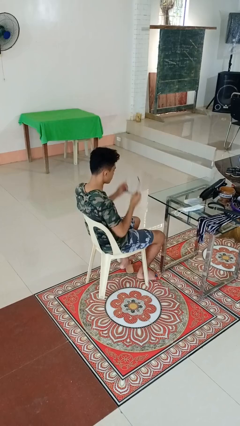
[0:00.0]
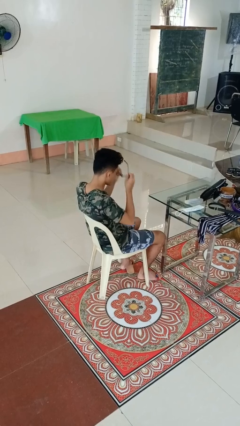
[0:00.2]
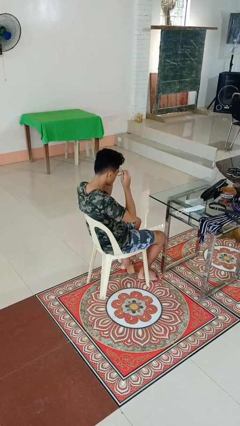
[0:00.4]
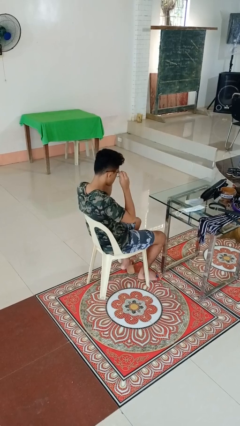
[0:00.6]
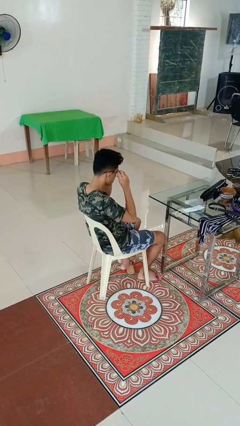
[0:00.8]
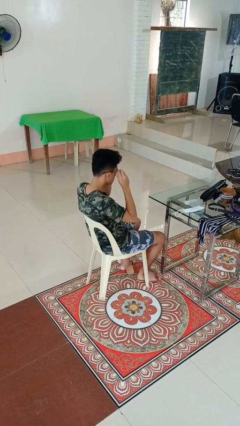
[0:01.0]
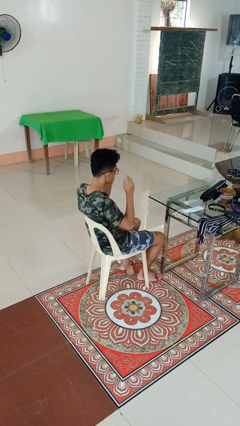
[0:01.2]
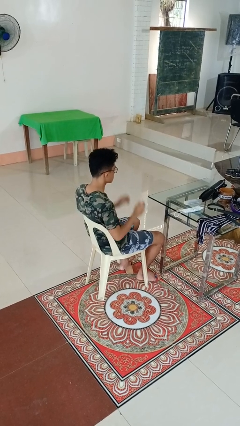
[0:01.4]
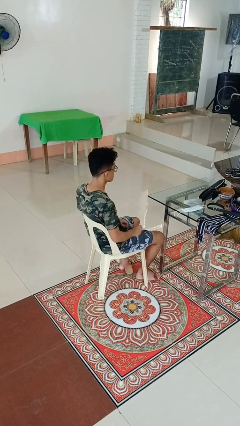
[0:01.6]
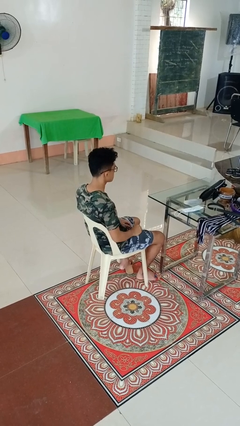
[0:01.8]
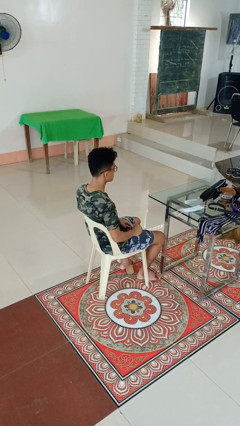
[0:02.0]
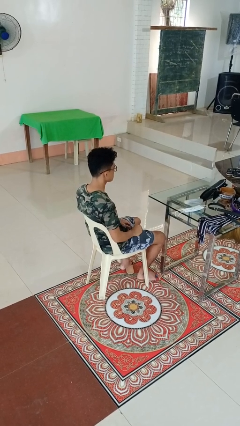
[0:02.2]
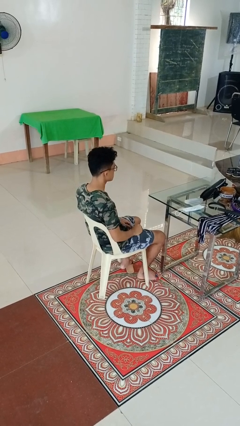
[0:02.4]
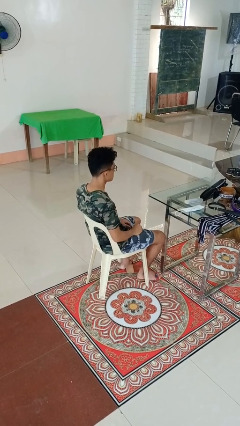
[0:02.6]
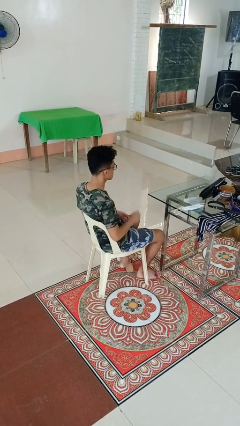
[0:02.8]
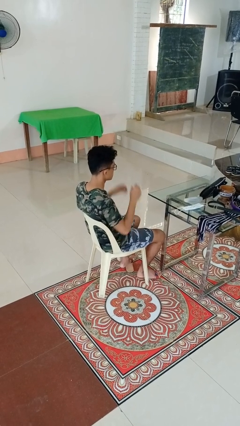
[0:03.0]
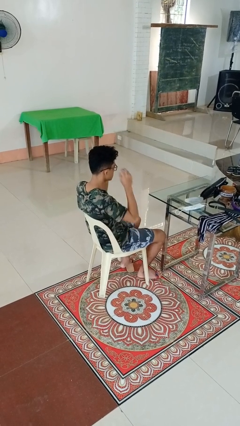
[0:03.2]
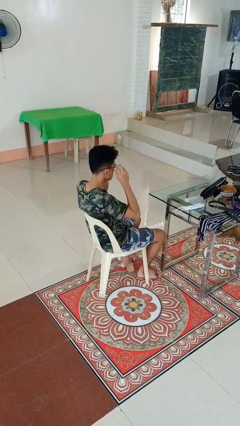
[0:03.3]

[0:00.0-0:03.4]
person puts on glasses

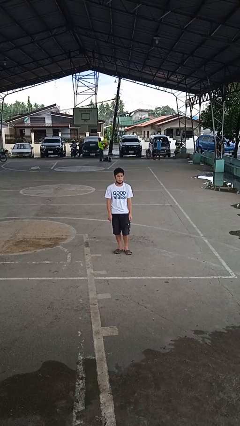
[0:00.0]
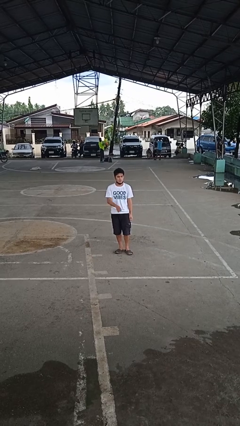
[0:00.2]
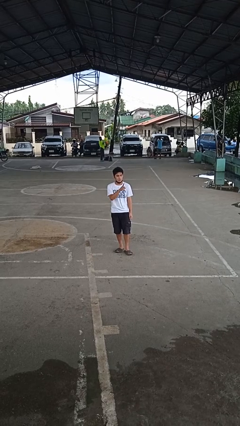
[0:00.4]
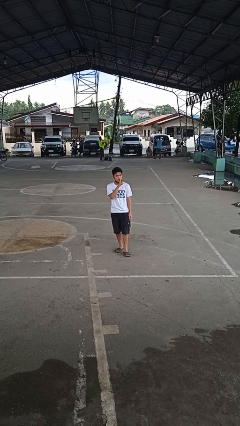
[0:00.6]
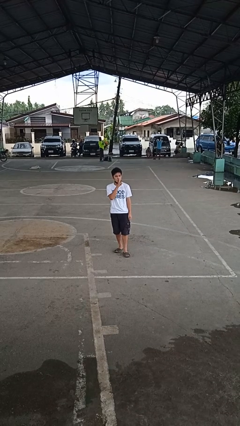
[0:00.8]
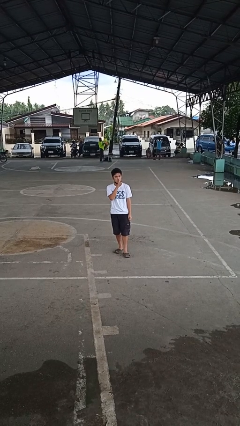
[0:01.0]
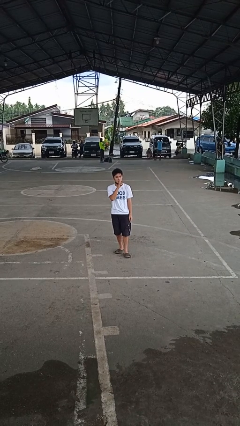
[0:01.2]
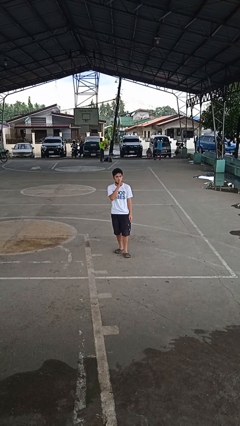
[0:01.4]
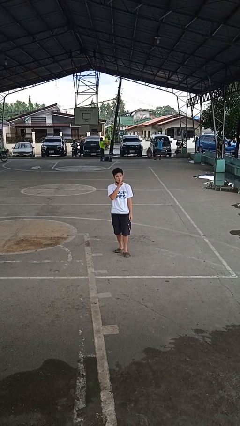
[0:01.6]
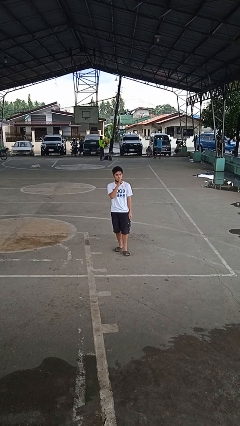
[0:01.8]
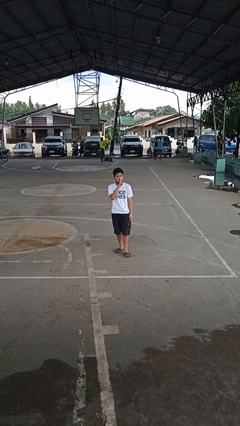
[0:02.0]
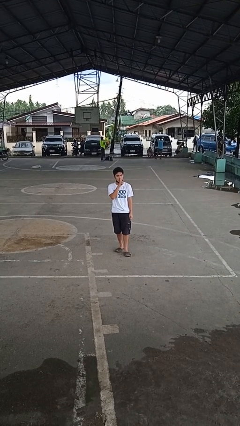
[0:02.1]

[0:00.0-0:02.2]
person gestures be quiet

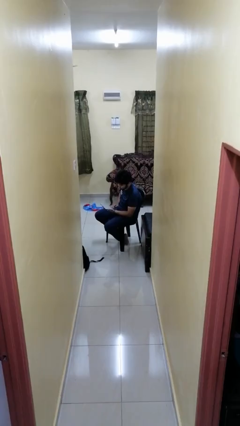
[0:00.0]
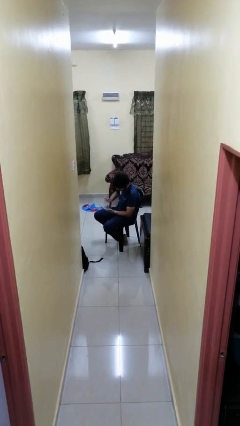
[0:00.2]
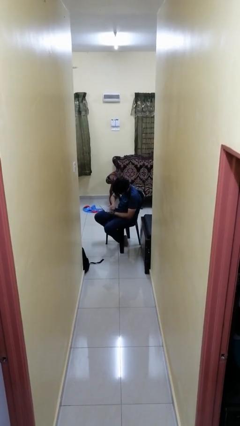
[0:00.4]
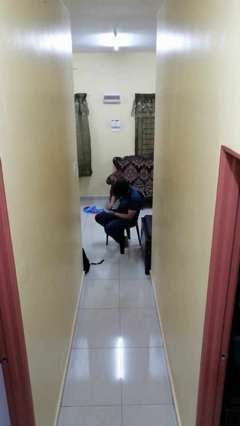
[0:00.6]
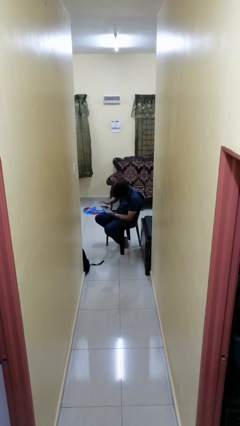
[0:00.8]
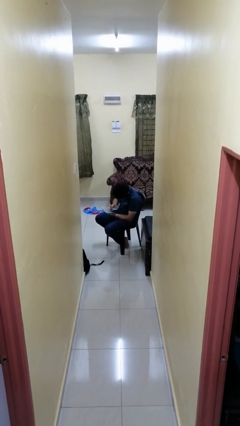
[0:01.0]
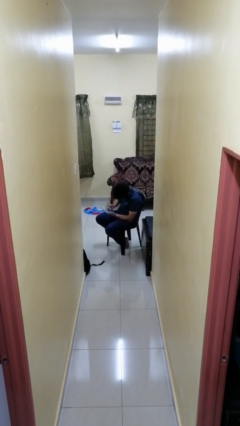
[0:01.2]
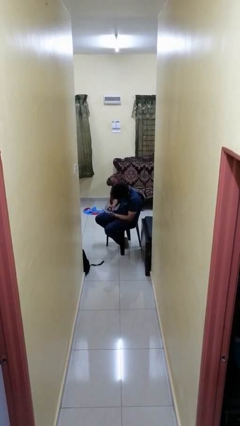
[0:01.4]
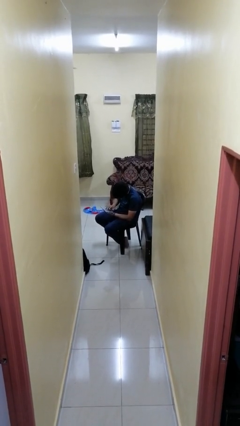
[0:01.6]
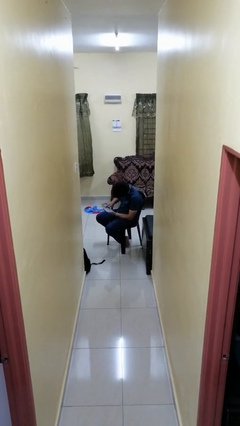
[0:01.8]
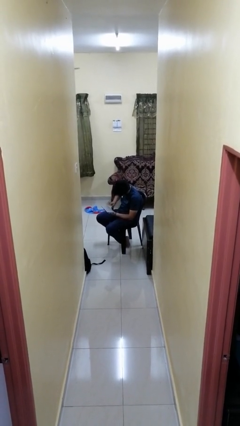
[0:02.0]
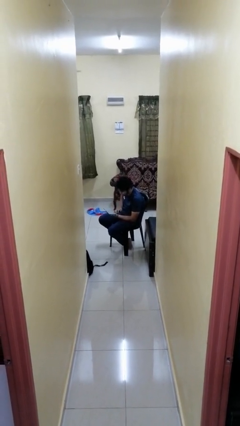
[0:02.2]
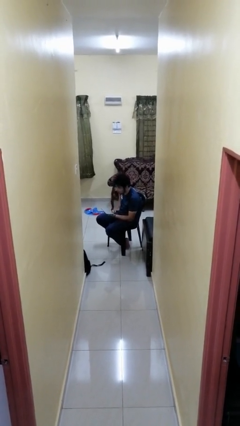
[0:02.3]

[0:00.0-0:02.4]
person interacts with tablet

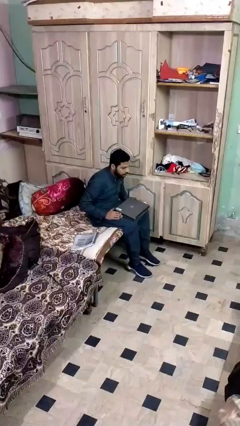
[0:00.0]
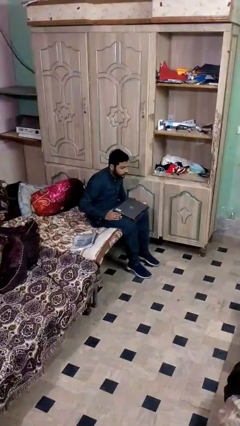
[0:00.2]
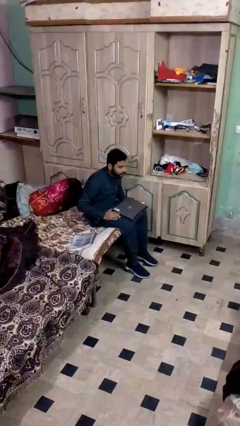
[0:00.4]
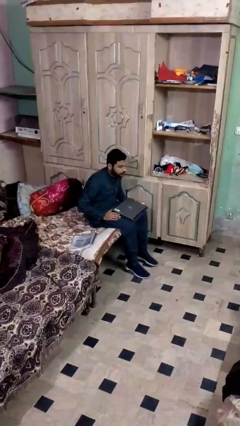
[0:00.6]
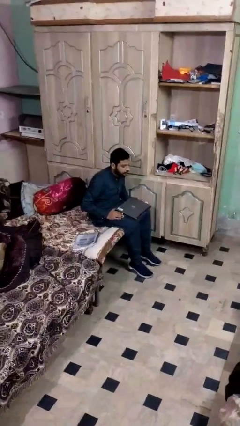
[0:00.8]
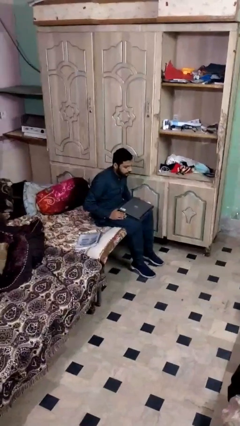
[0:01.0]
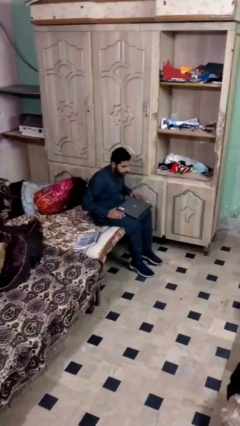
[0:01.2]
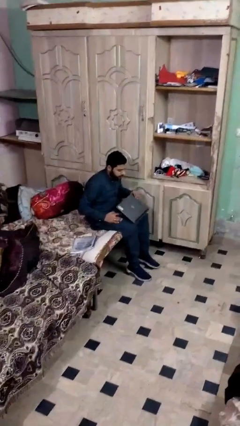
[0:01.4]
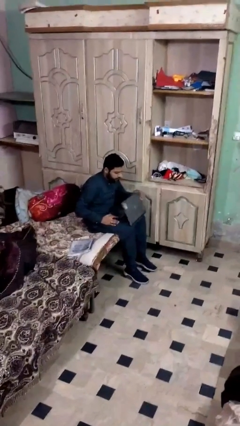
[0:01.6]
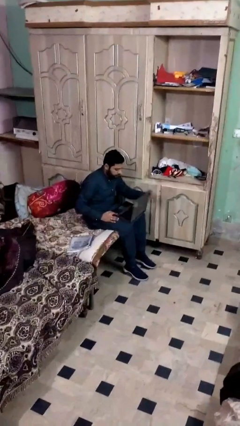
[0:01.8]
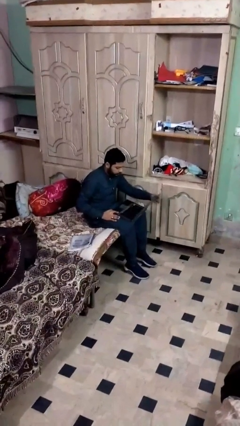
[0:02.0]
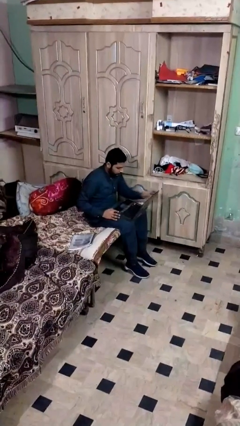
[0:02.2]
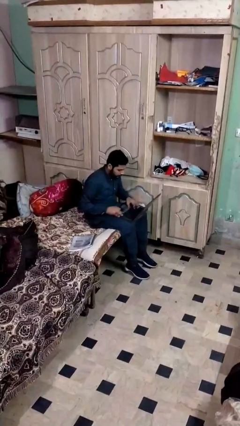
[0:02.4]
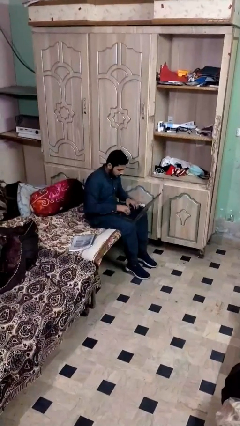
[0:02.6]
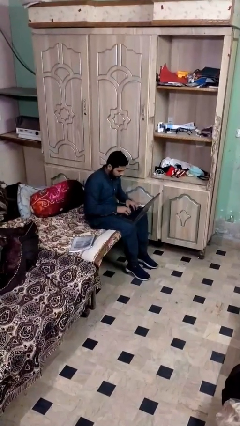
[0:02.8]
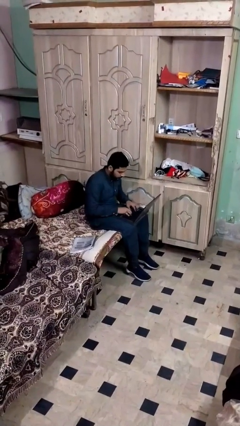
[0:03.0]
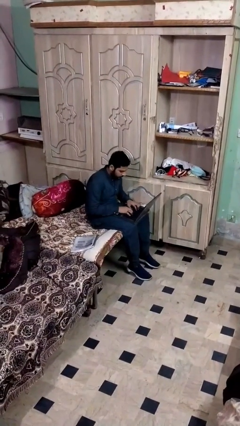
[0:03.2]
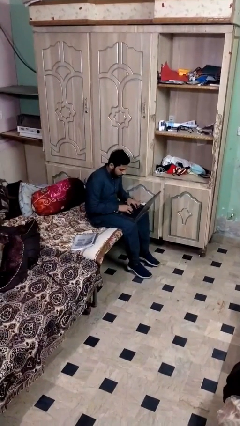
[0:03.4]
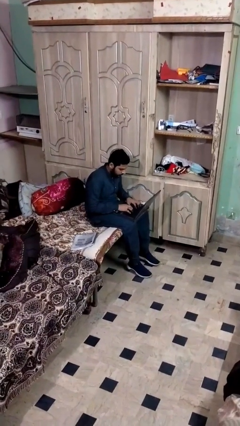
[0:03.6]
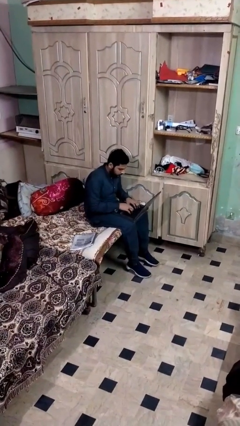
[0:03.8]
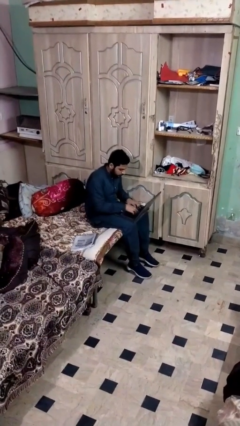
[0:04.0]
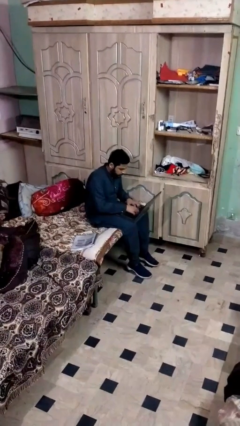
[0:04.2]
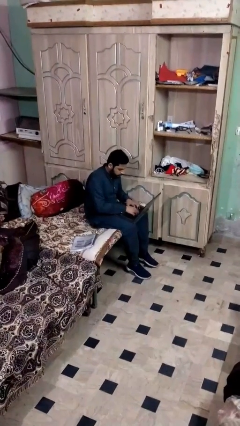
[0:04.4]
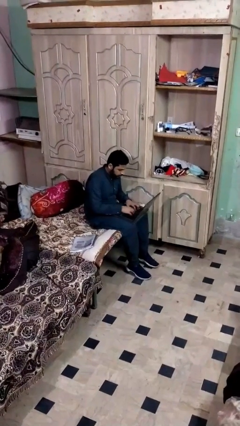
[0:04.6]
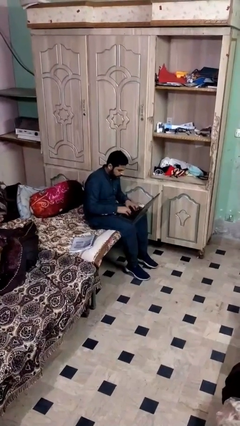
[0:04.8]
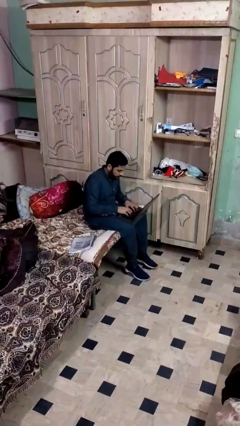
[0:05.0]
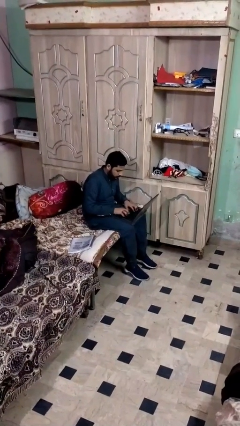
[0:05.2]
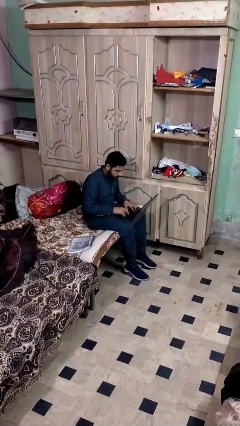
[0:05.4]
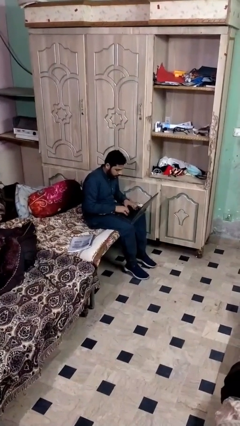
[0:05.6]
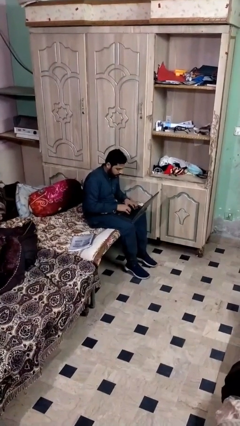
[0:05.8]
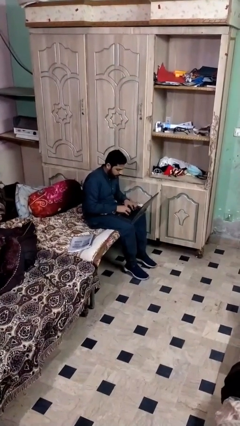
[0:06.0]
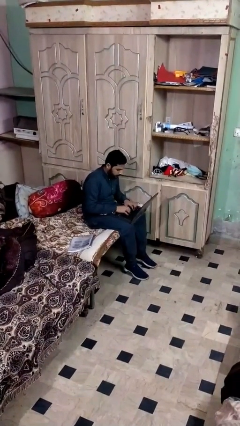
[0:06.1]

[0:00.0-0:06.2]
person interacts with laptop

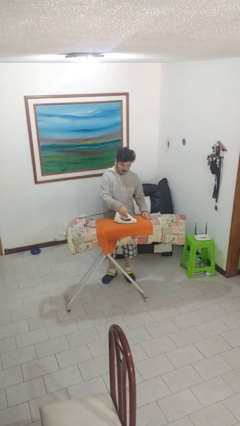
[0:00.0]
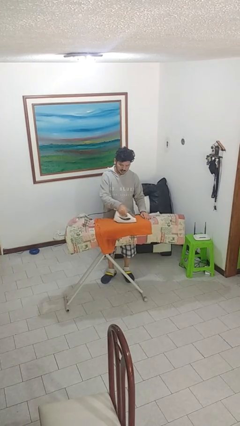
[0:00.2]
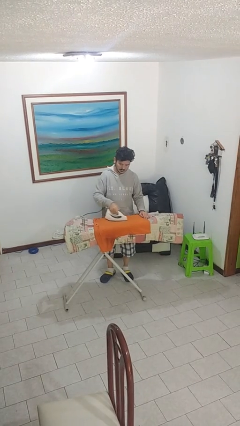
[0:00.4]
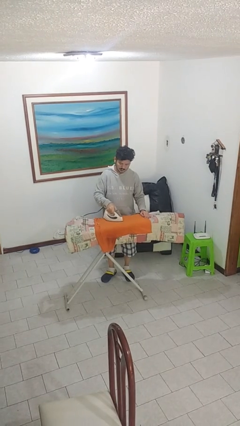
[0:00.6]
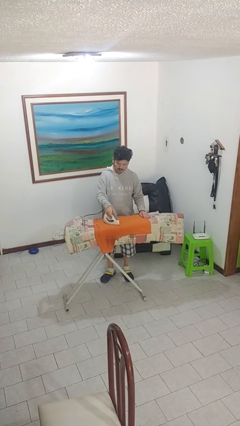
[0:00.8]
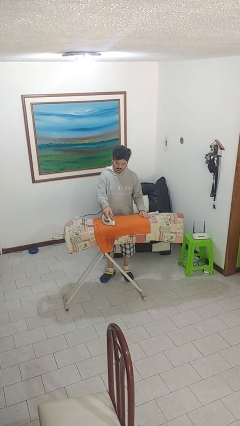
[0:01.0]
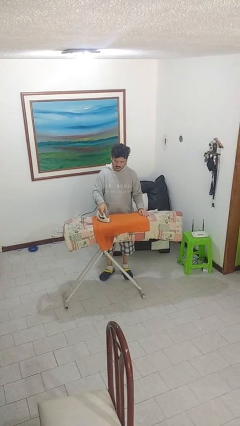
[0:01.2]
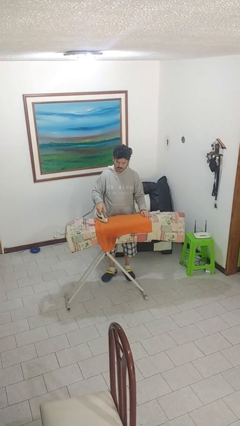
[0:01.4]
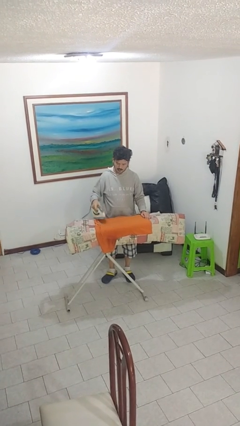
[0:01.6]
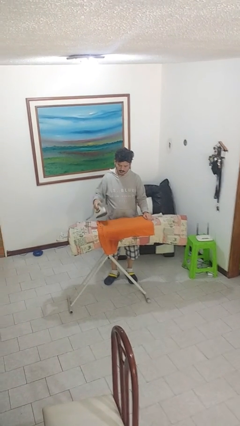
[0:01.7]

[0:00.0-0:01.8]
person irons clothes

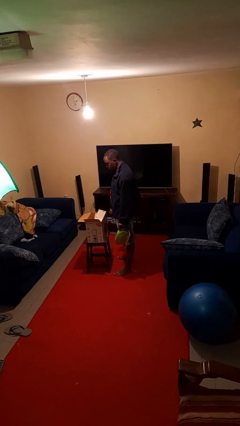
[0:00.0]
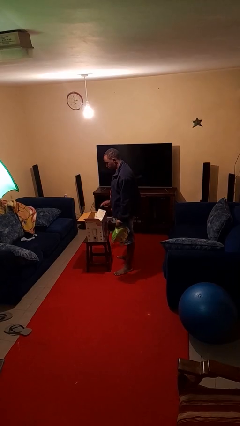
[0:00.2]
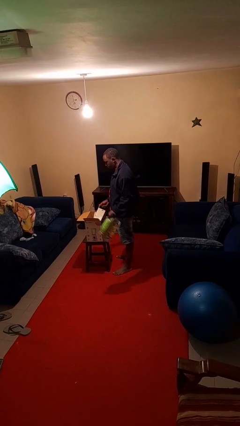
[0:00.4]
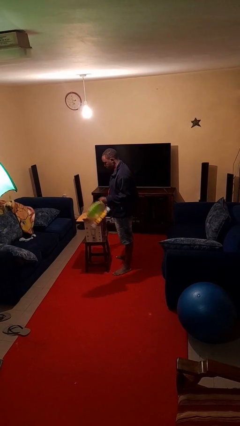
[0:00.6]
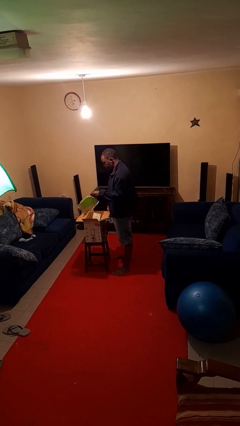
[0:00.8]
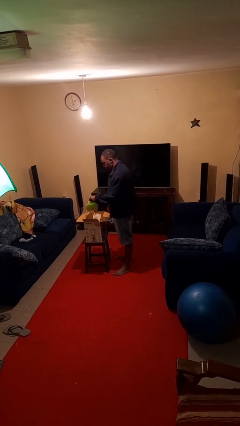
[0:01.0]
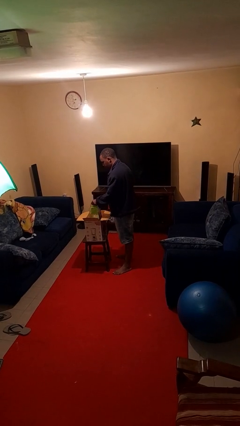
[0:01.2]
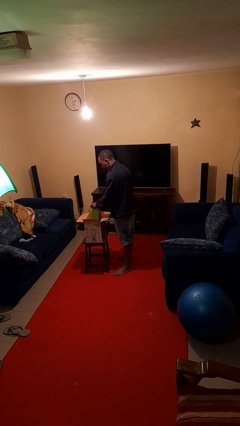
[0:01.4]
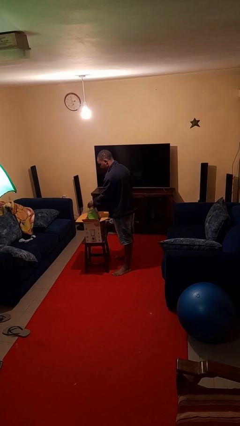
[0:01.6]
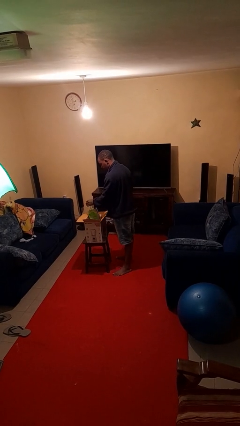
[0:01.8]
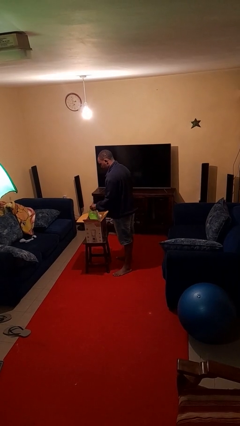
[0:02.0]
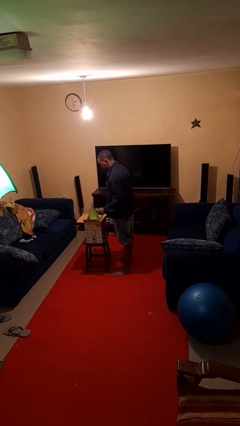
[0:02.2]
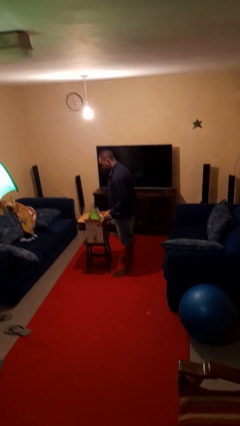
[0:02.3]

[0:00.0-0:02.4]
person puts object into box
